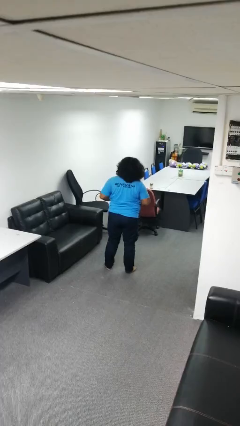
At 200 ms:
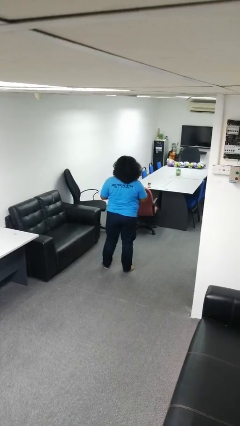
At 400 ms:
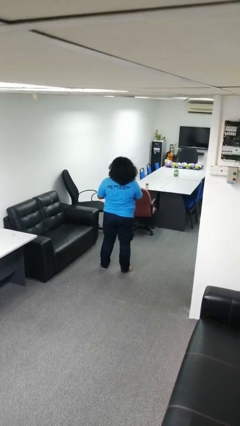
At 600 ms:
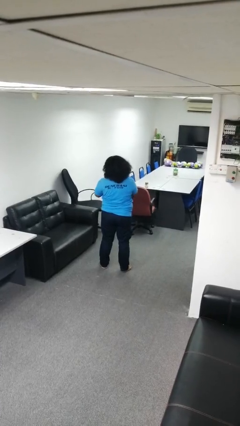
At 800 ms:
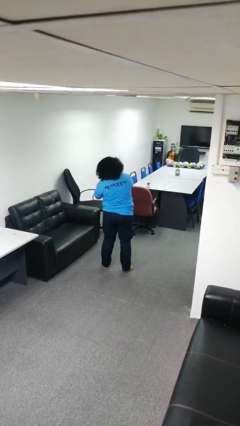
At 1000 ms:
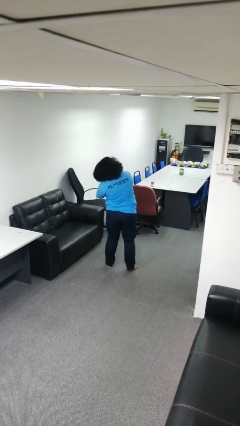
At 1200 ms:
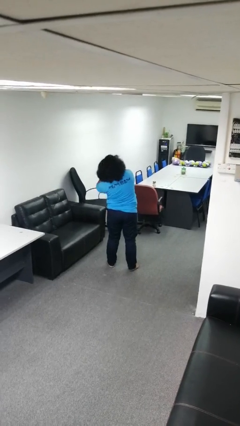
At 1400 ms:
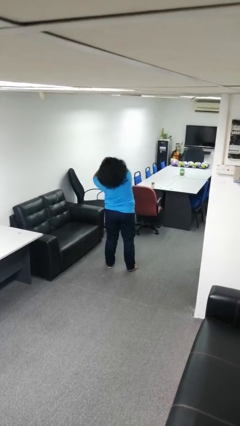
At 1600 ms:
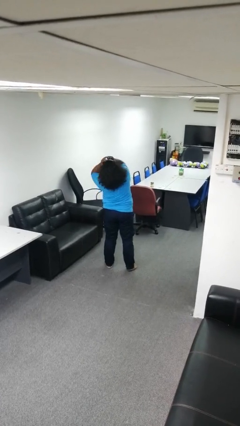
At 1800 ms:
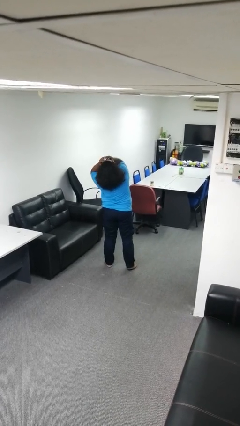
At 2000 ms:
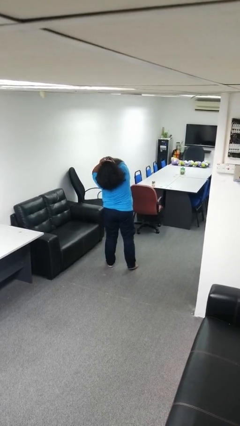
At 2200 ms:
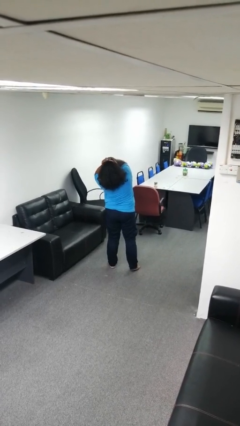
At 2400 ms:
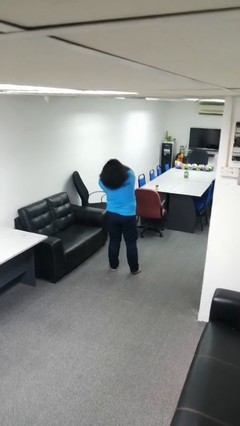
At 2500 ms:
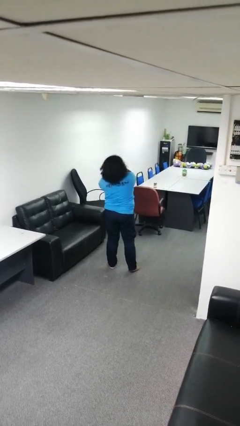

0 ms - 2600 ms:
person covers face with hands

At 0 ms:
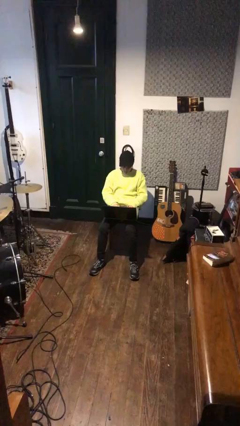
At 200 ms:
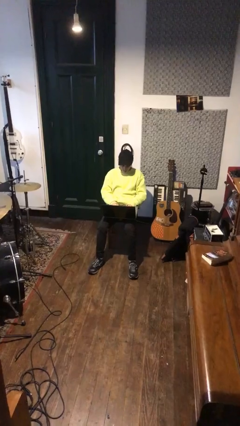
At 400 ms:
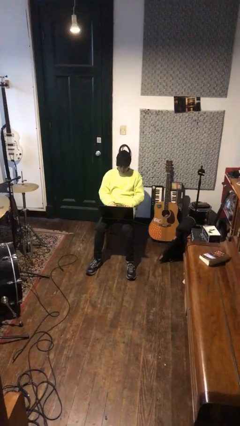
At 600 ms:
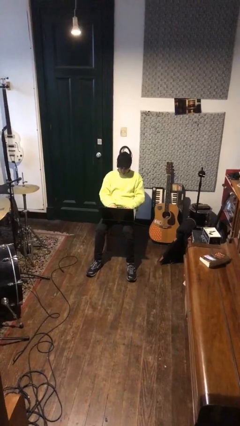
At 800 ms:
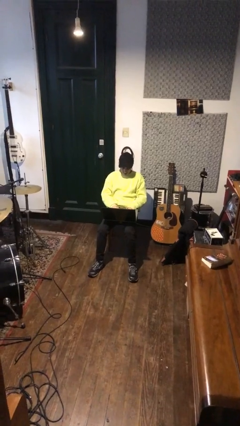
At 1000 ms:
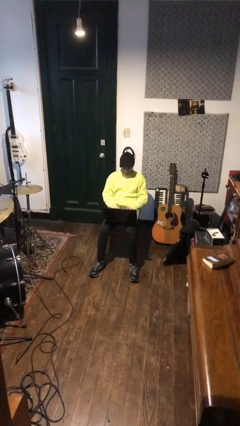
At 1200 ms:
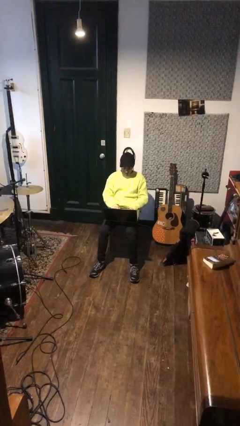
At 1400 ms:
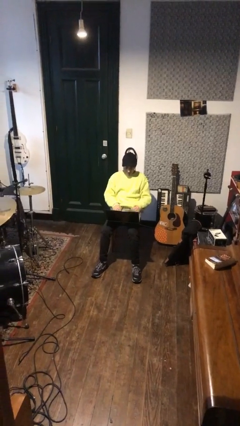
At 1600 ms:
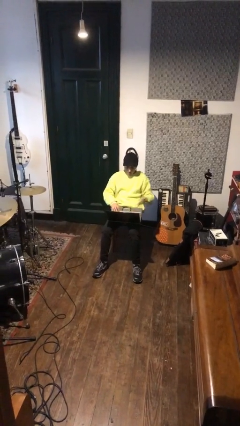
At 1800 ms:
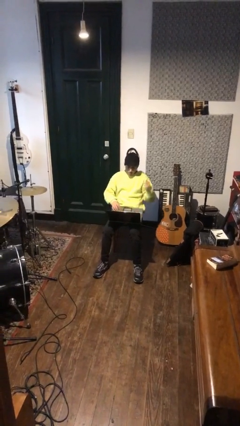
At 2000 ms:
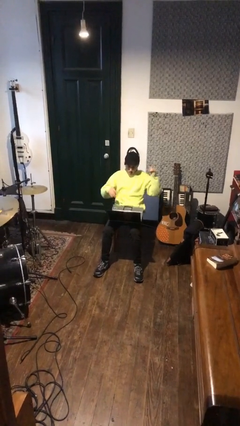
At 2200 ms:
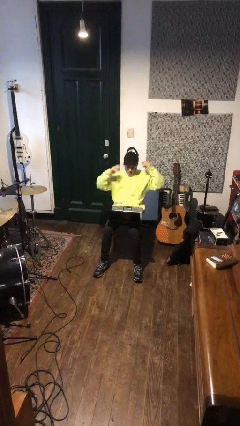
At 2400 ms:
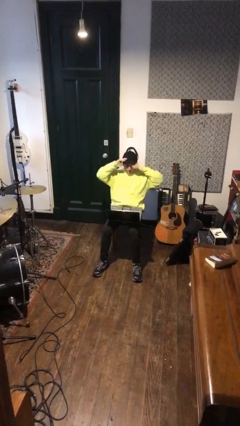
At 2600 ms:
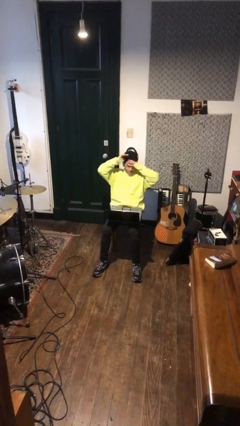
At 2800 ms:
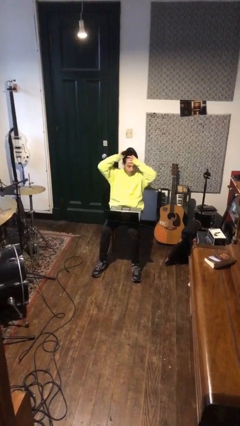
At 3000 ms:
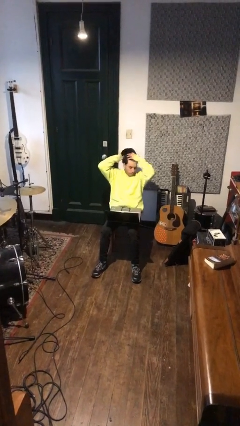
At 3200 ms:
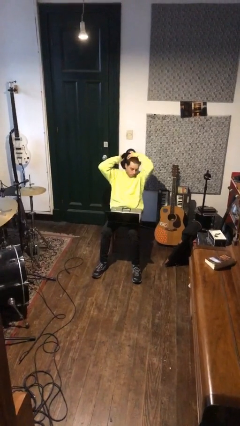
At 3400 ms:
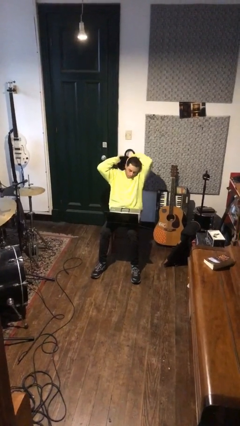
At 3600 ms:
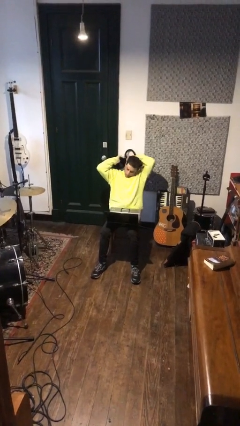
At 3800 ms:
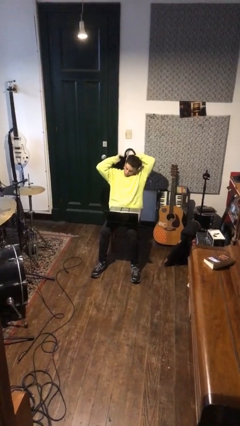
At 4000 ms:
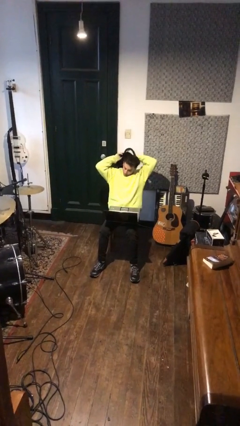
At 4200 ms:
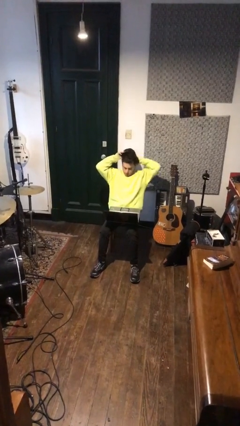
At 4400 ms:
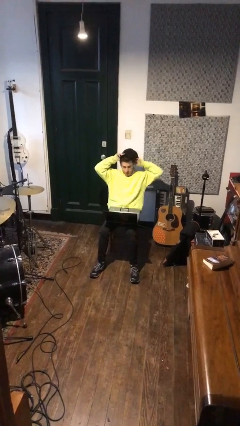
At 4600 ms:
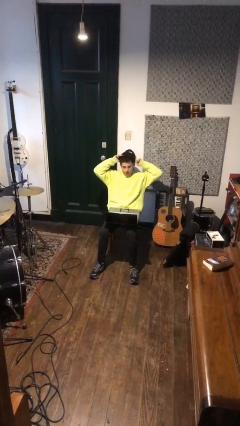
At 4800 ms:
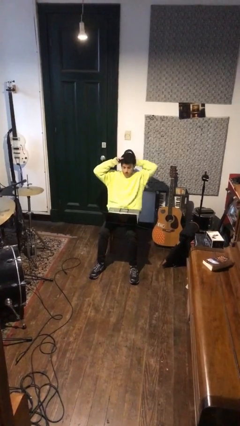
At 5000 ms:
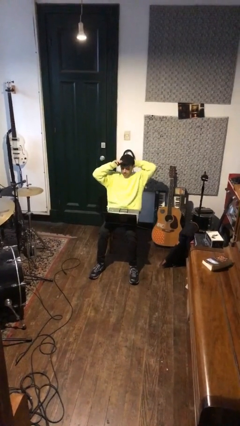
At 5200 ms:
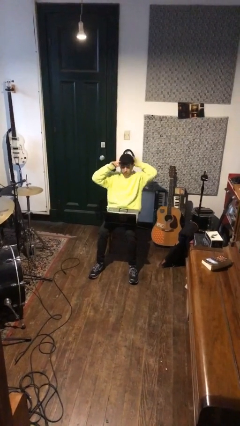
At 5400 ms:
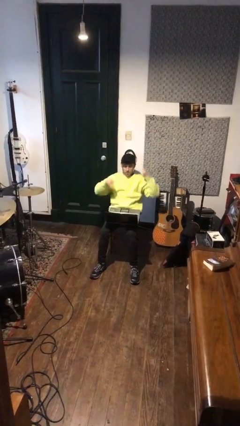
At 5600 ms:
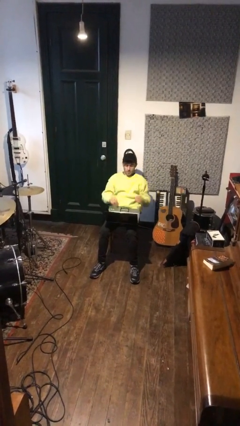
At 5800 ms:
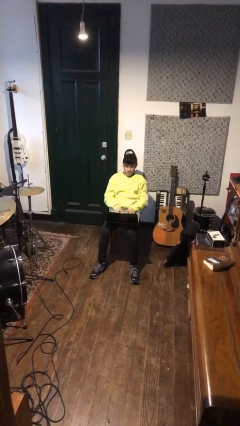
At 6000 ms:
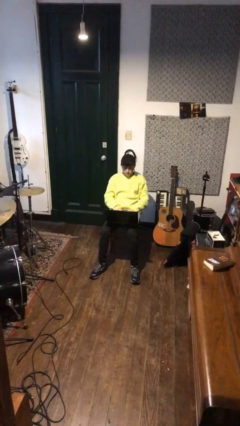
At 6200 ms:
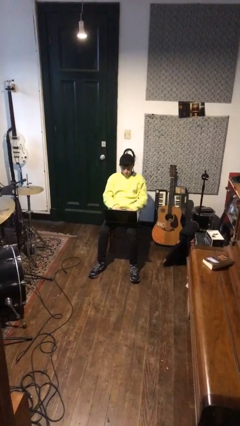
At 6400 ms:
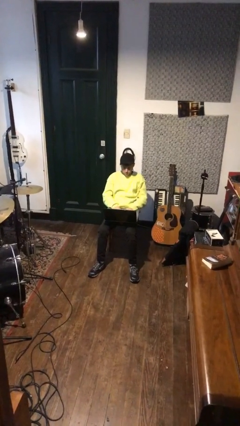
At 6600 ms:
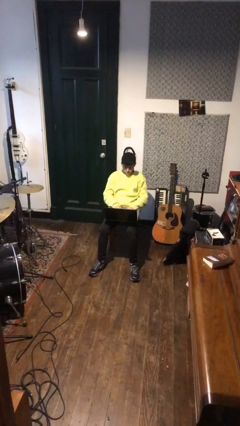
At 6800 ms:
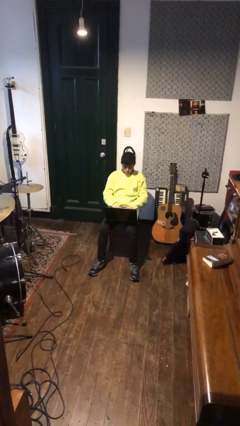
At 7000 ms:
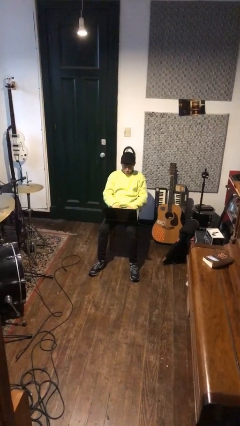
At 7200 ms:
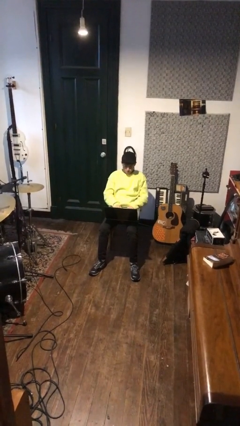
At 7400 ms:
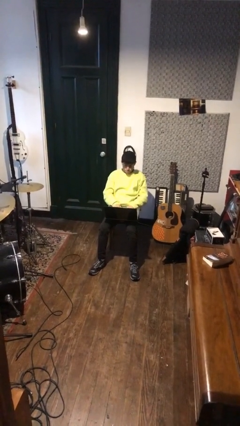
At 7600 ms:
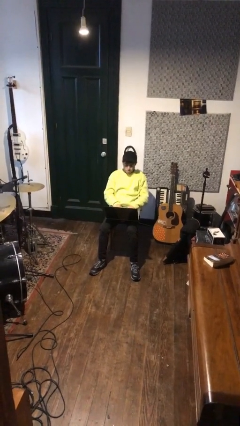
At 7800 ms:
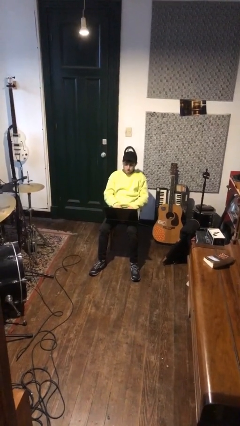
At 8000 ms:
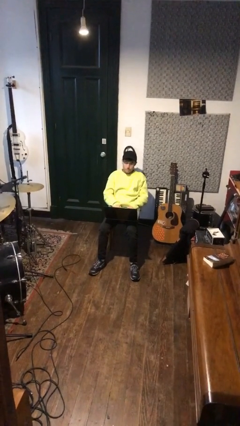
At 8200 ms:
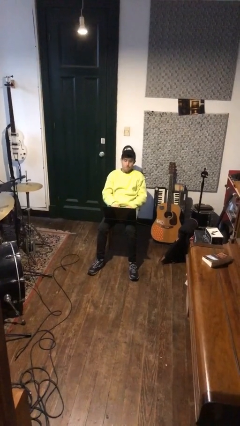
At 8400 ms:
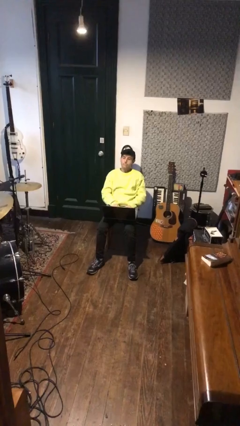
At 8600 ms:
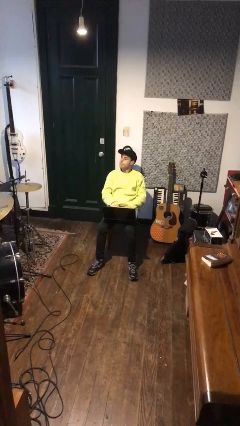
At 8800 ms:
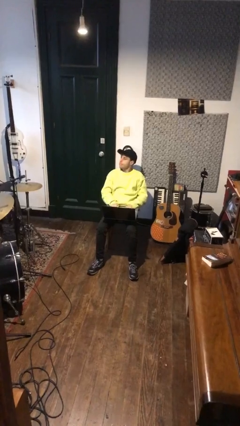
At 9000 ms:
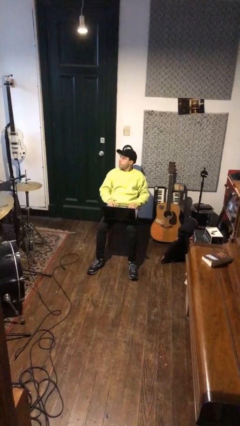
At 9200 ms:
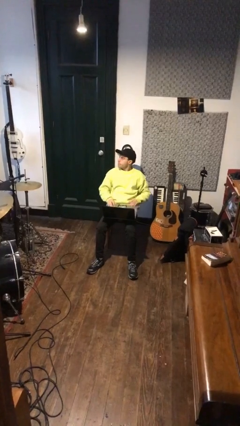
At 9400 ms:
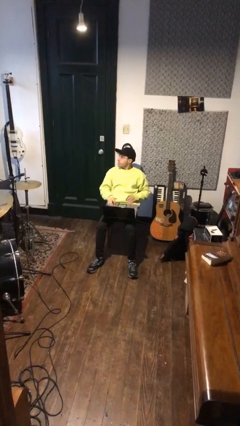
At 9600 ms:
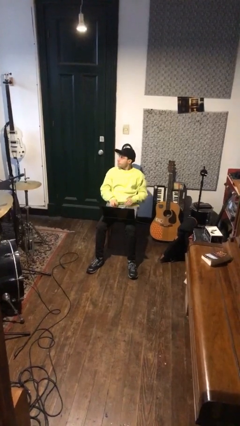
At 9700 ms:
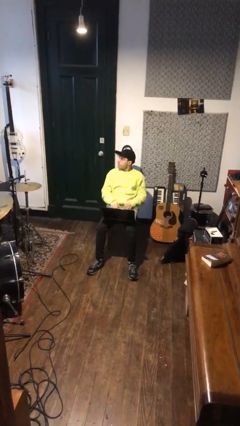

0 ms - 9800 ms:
person interacts with laptop

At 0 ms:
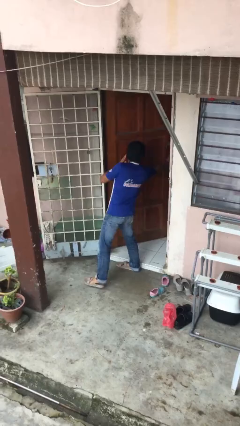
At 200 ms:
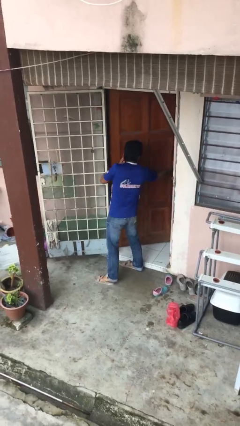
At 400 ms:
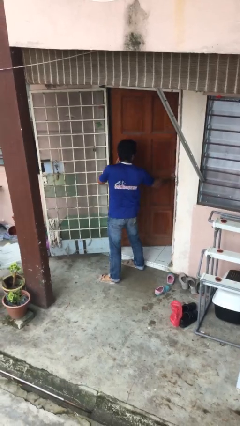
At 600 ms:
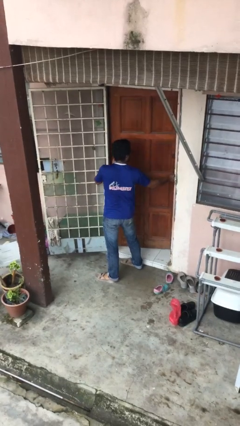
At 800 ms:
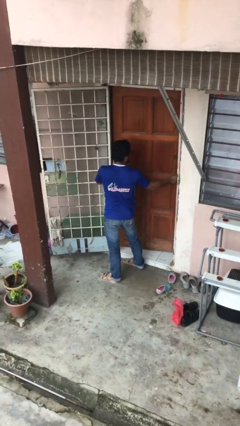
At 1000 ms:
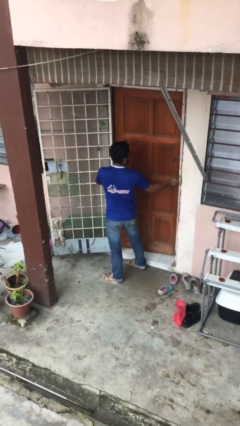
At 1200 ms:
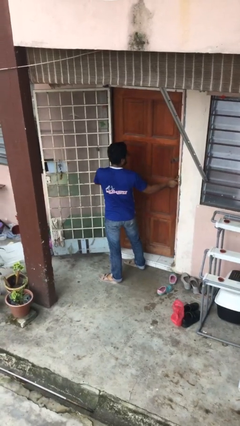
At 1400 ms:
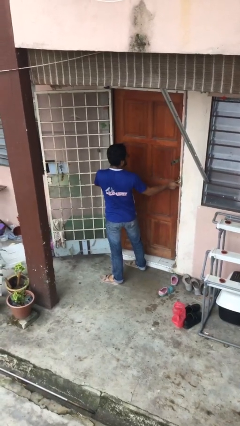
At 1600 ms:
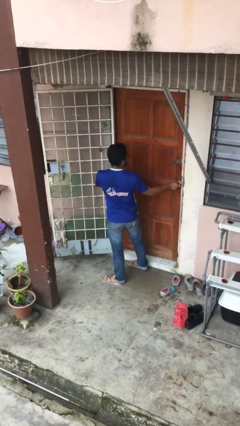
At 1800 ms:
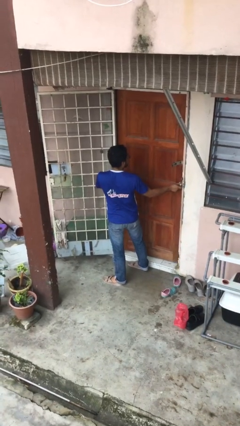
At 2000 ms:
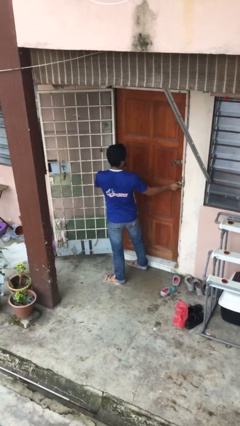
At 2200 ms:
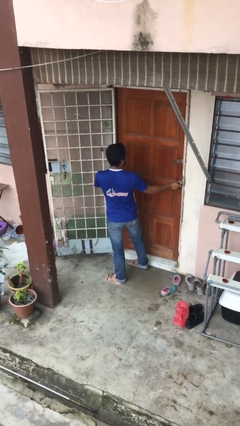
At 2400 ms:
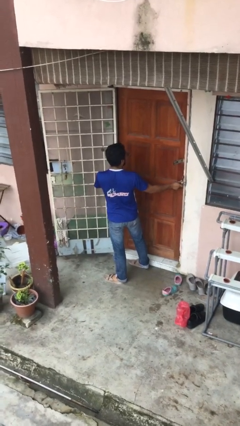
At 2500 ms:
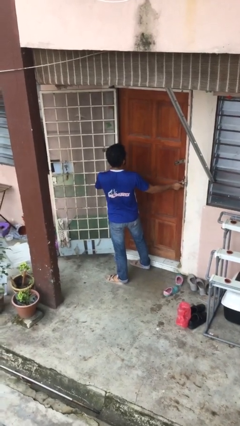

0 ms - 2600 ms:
person closes facility door

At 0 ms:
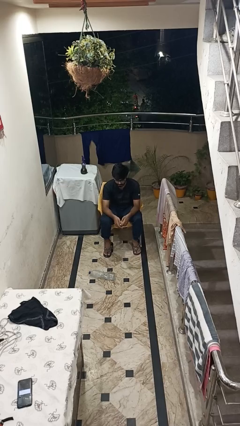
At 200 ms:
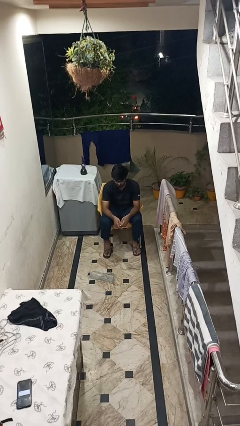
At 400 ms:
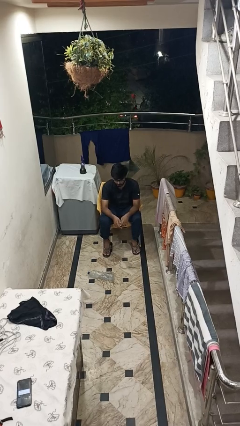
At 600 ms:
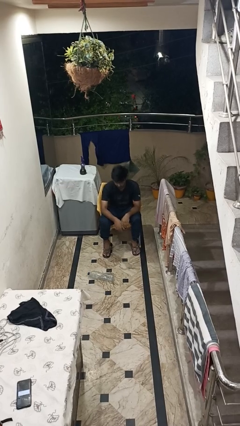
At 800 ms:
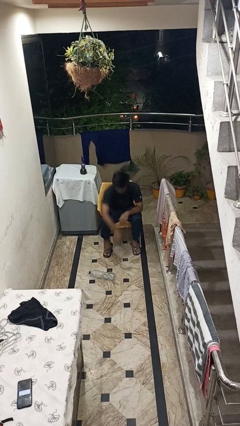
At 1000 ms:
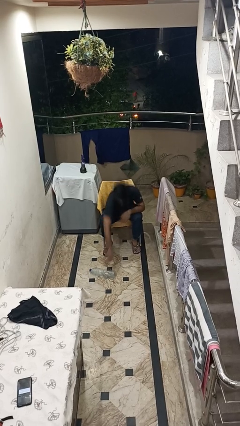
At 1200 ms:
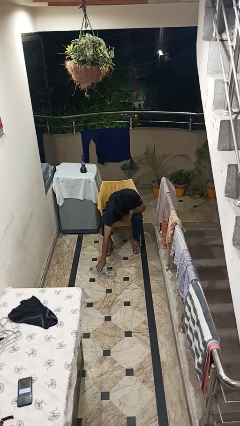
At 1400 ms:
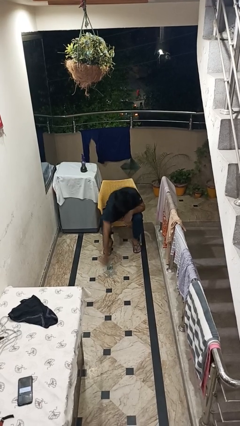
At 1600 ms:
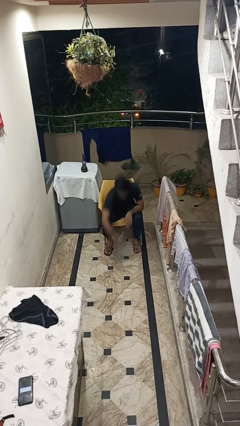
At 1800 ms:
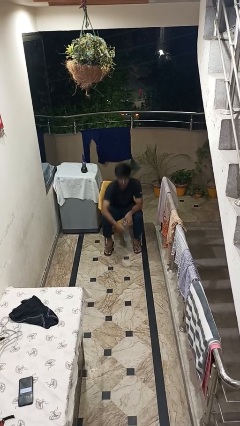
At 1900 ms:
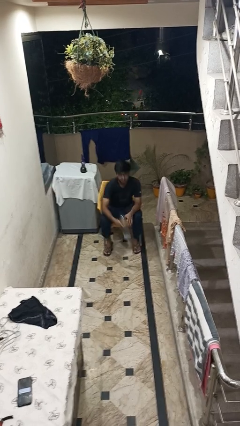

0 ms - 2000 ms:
person picks up object from floor

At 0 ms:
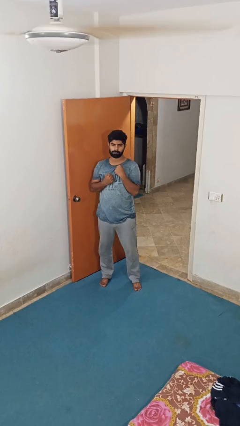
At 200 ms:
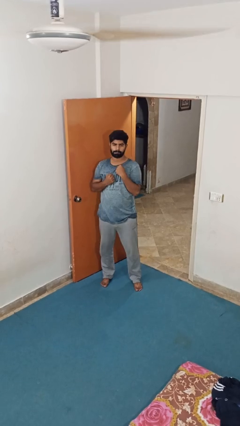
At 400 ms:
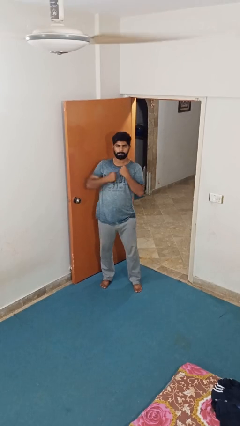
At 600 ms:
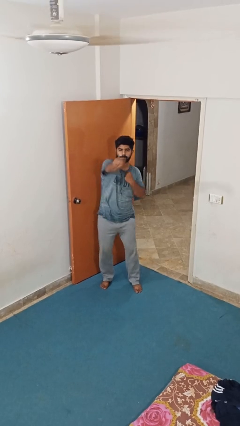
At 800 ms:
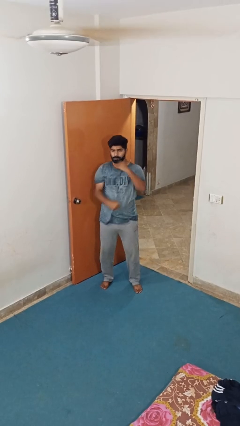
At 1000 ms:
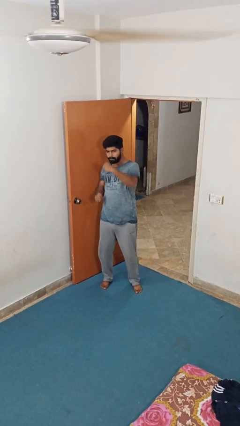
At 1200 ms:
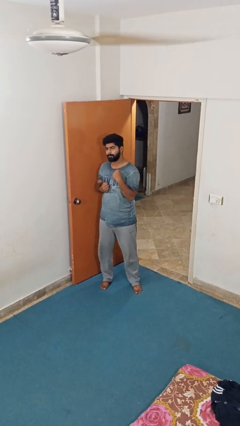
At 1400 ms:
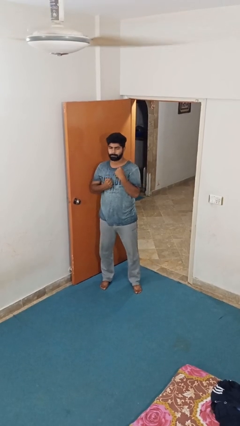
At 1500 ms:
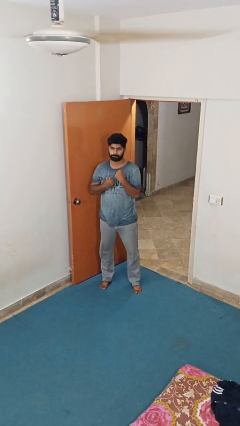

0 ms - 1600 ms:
person punches
